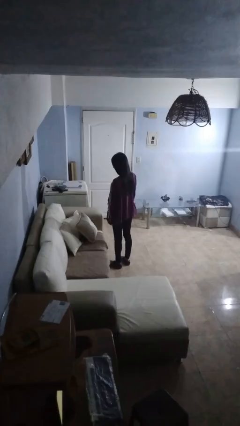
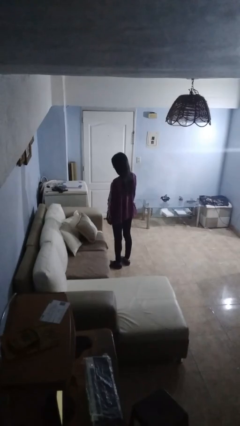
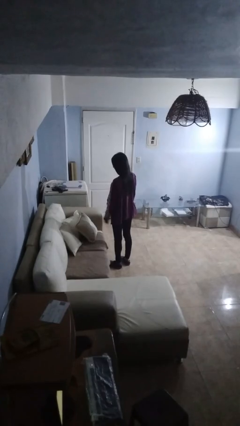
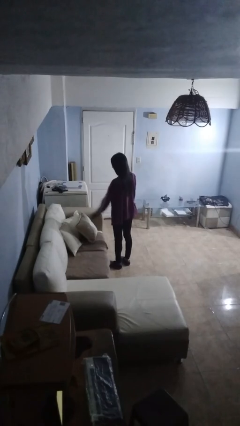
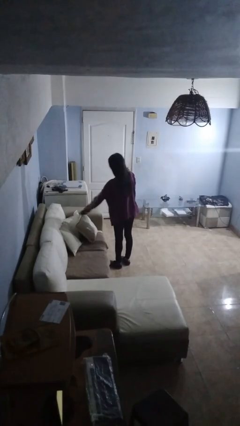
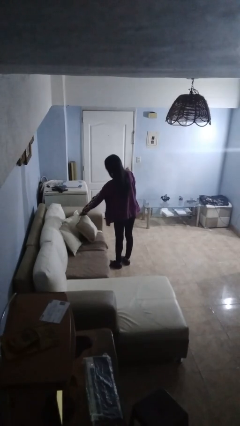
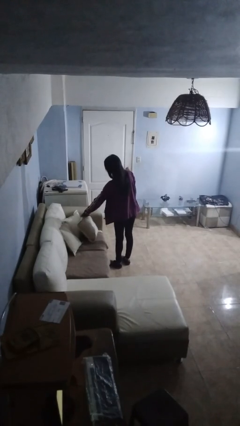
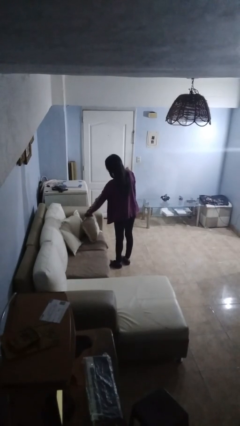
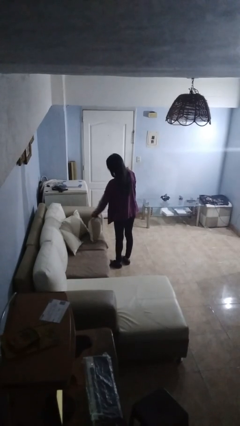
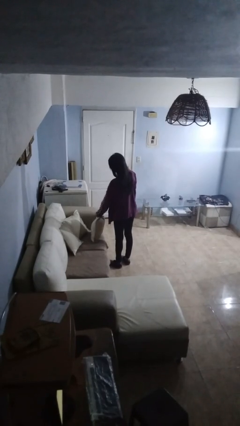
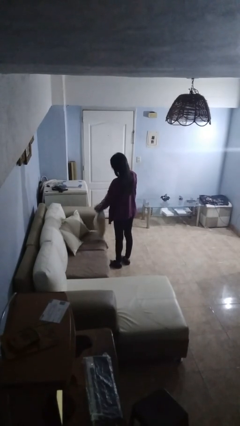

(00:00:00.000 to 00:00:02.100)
person puts down object on couch

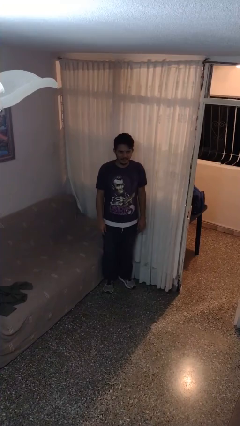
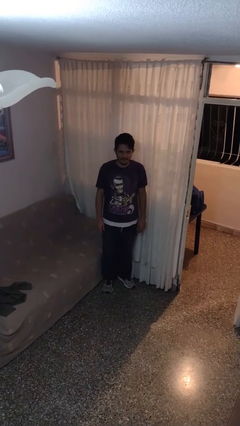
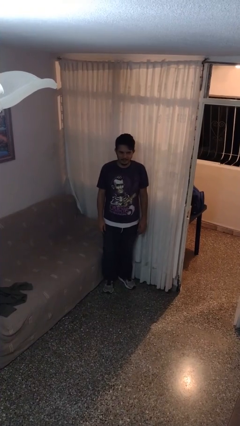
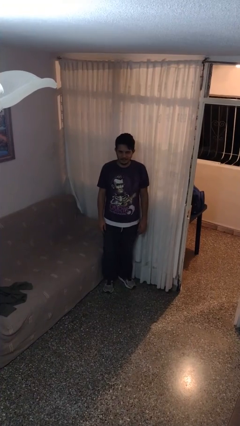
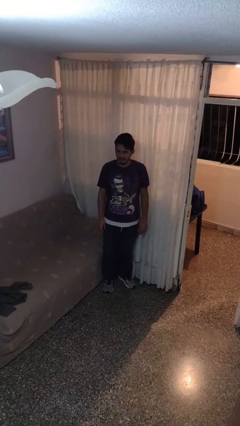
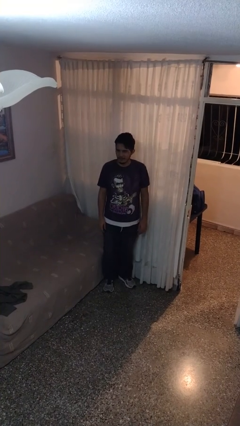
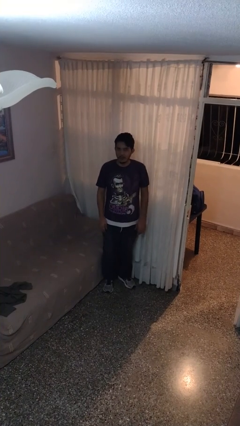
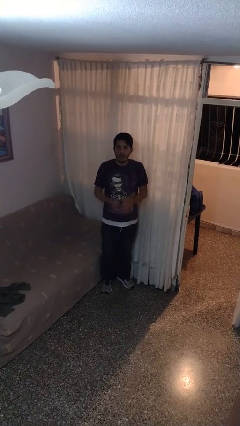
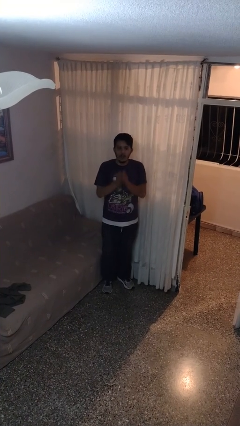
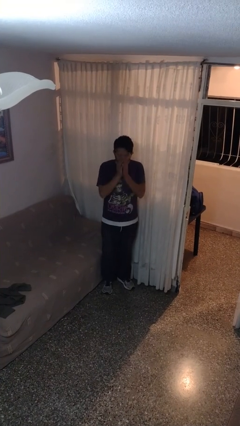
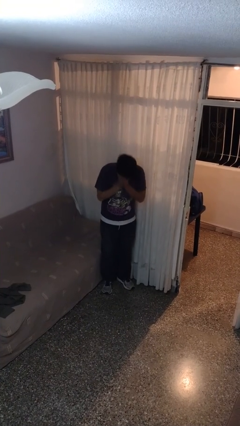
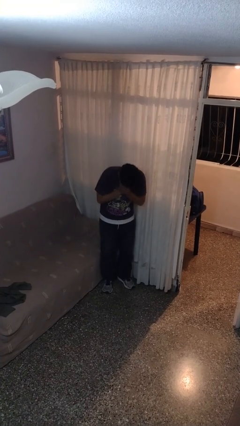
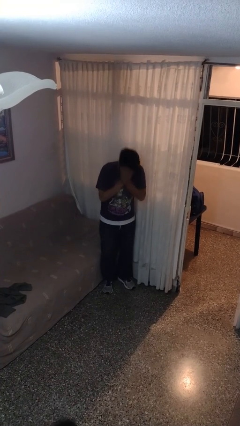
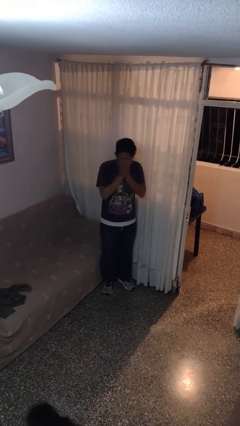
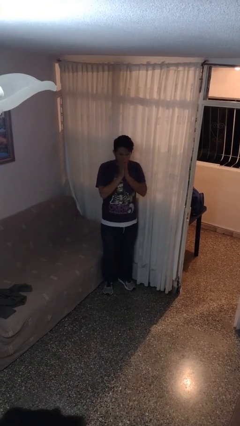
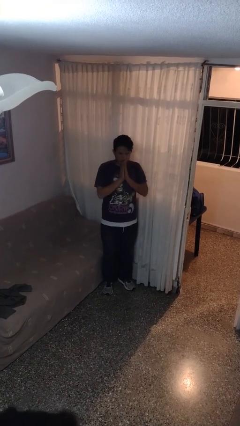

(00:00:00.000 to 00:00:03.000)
person sneezes into hand

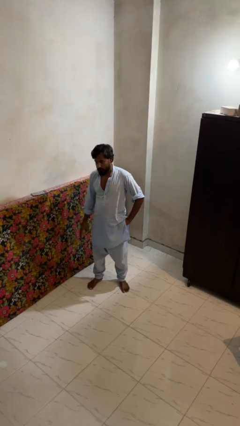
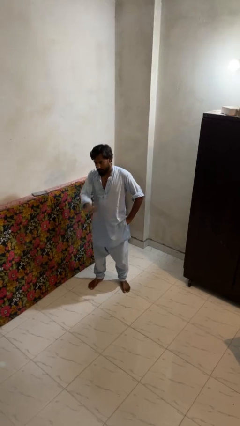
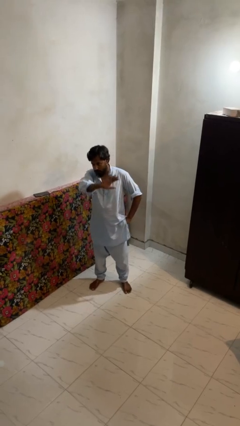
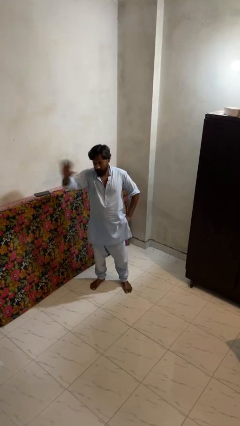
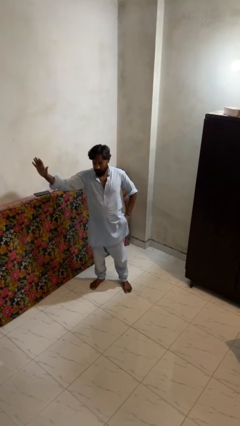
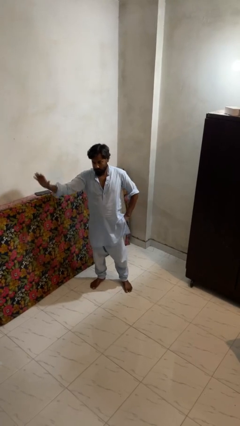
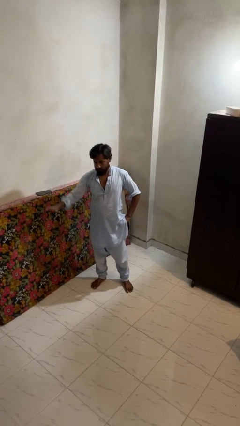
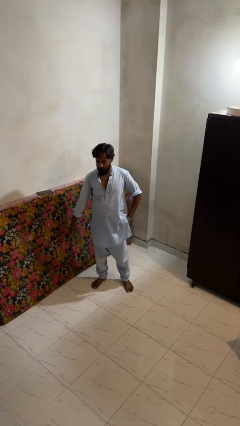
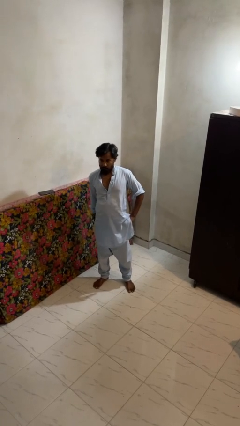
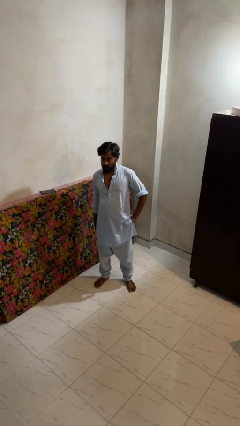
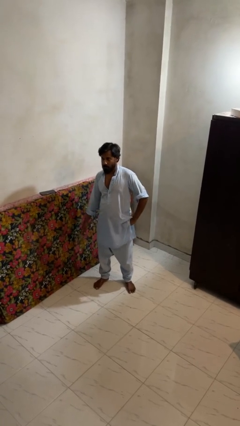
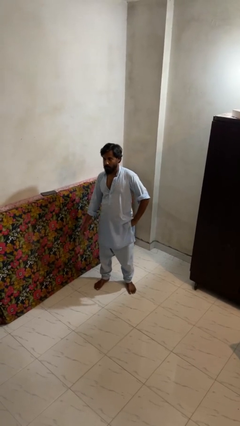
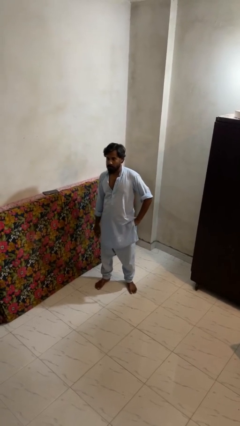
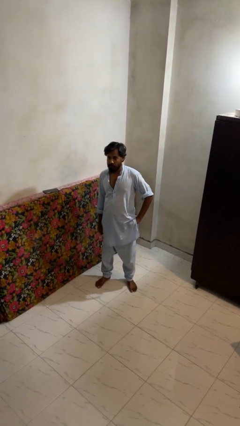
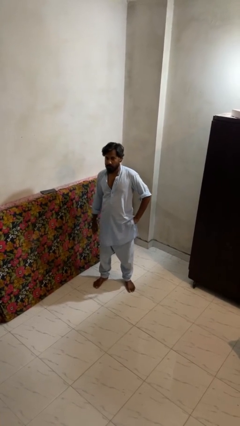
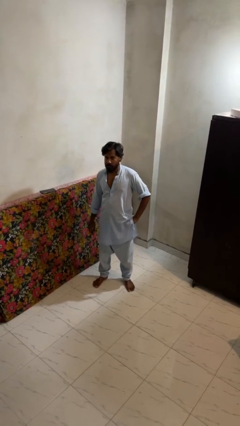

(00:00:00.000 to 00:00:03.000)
person gestures swipe right

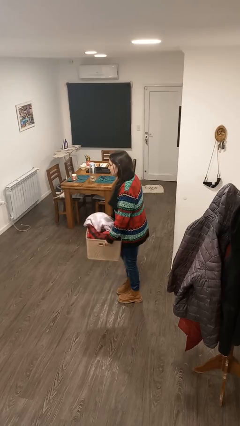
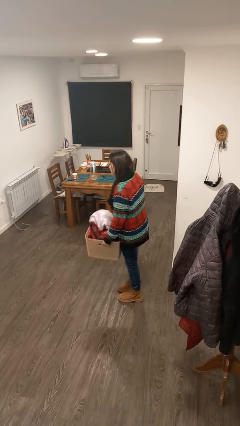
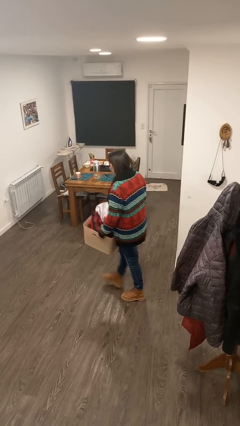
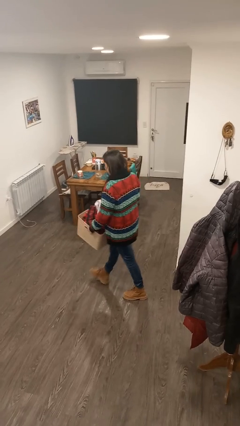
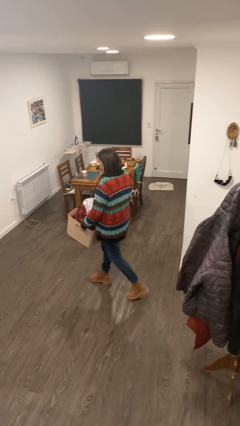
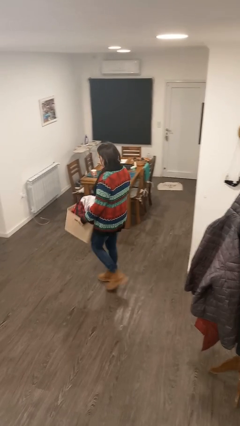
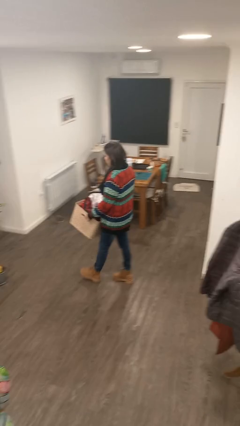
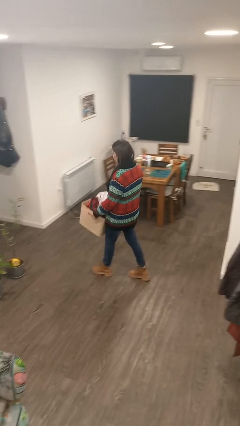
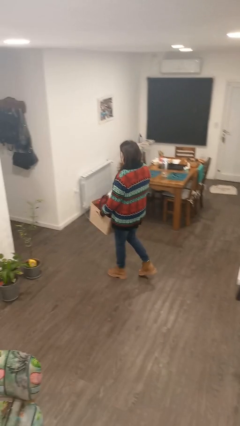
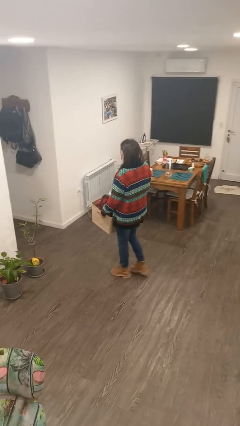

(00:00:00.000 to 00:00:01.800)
person carries laundry basket

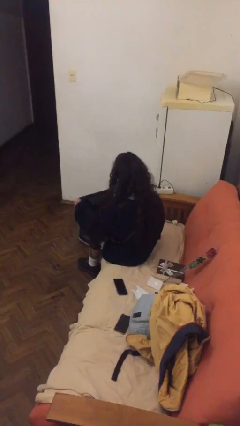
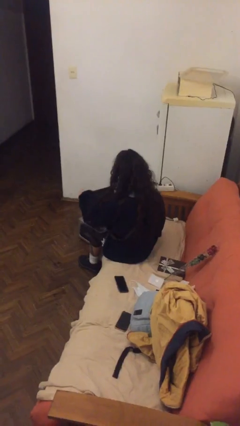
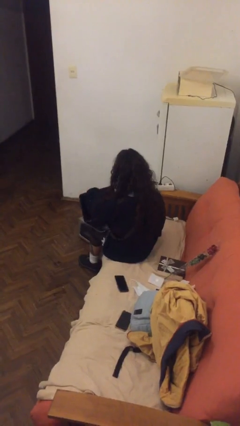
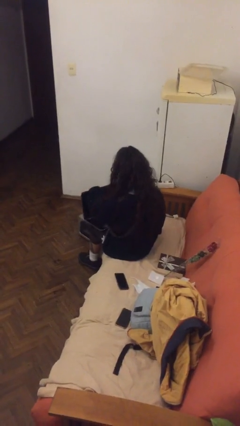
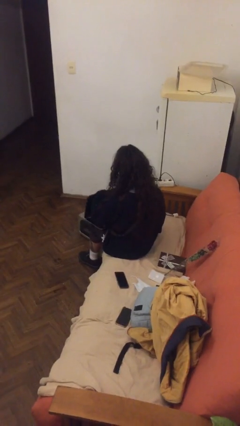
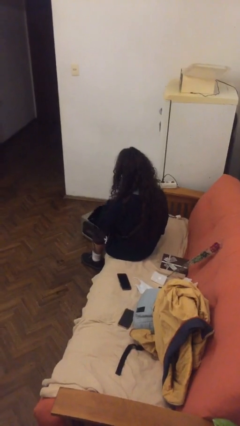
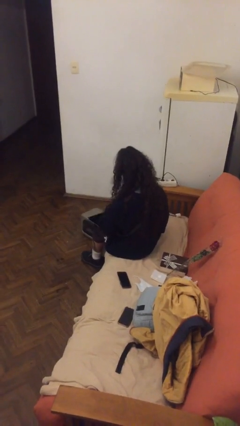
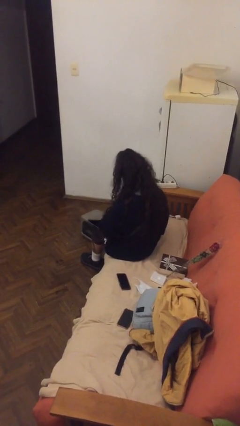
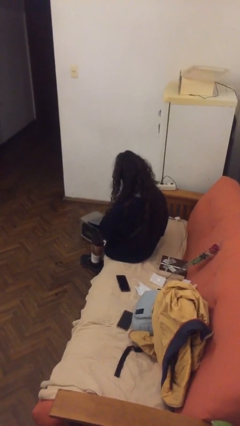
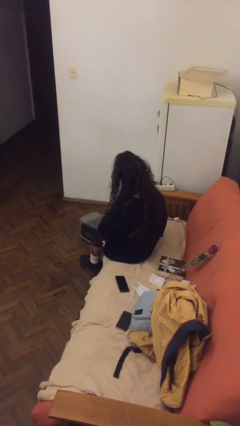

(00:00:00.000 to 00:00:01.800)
person closes laptop

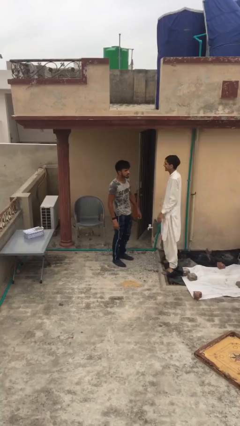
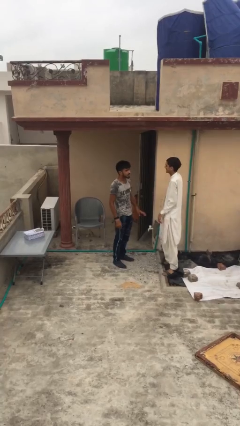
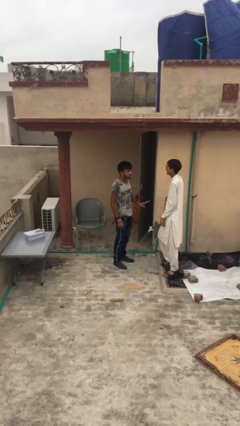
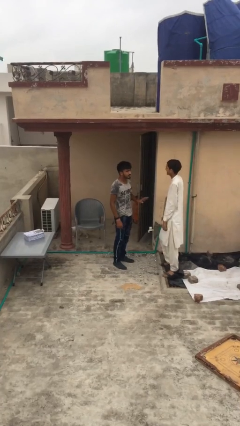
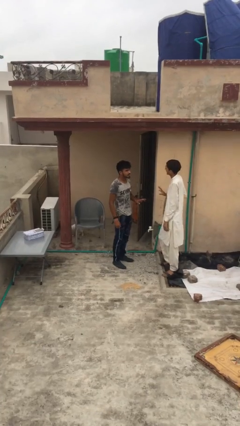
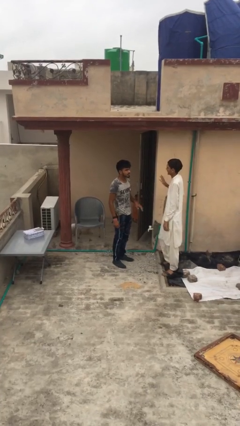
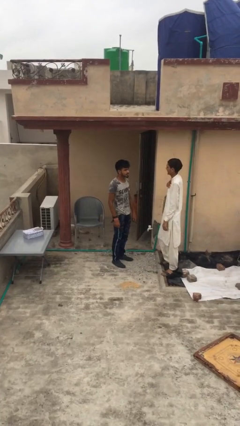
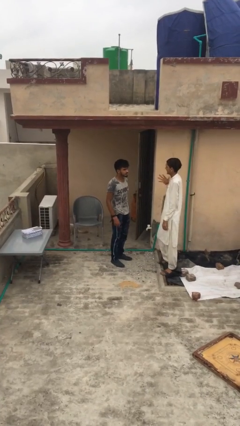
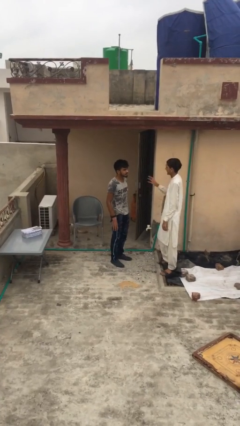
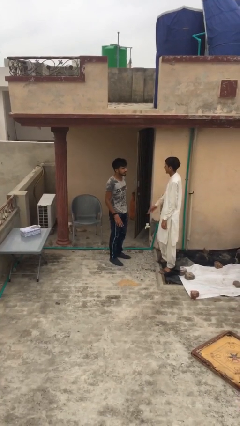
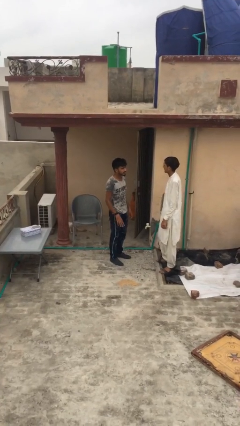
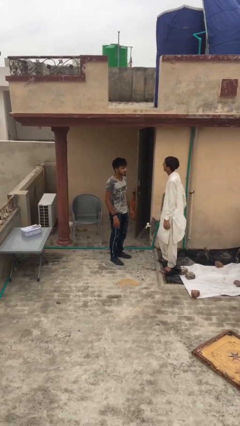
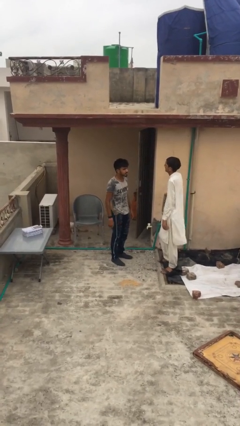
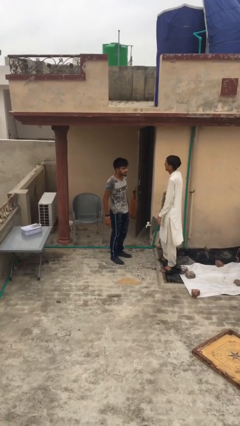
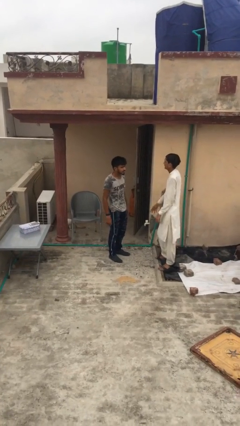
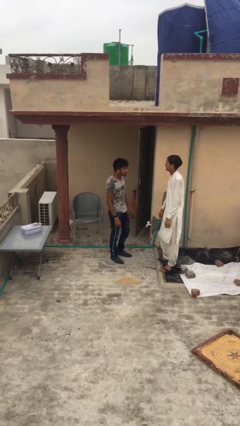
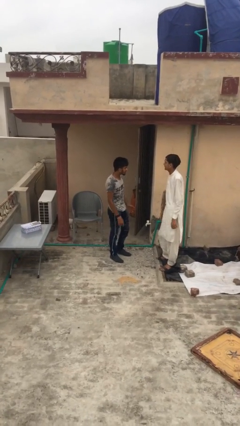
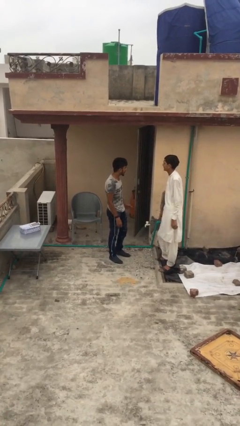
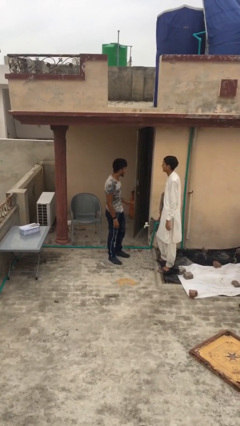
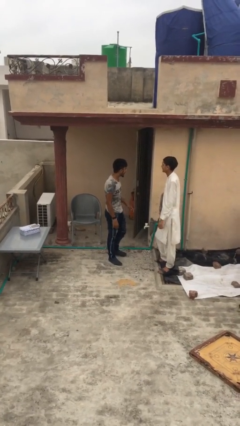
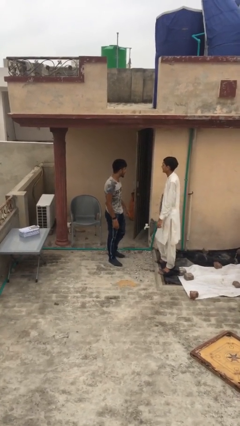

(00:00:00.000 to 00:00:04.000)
person talks to person

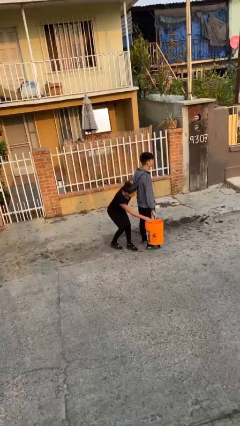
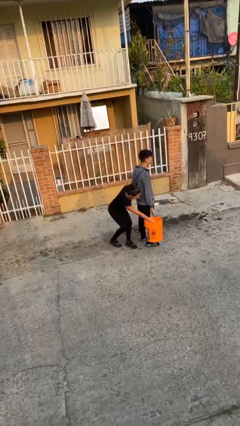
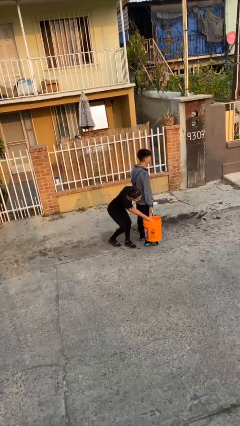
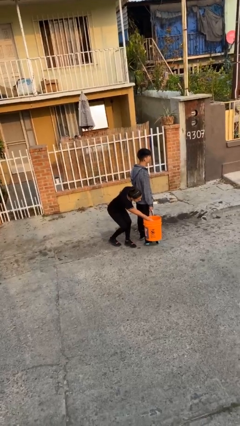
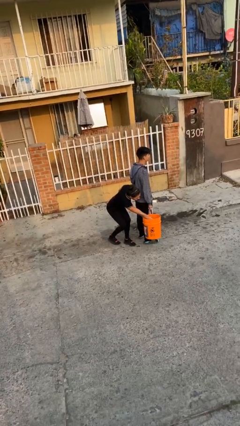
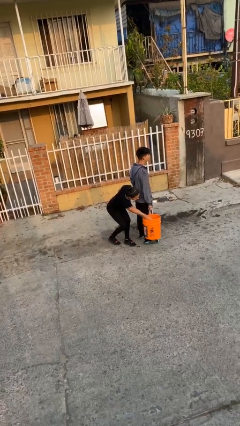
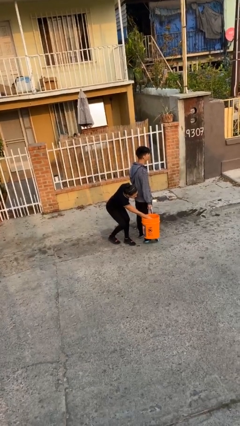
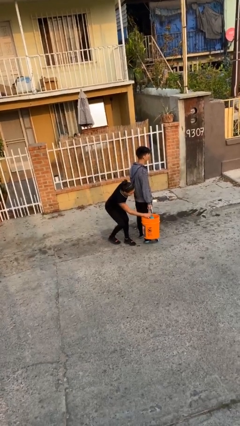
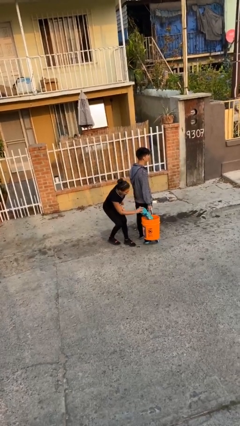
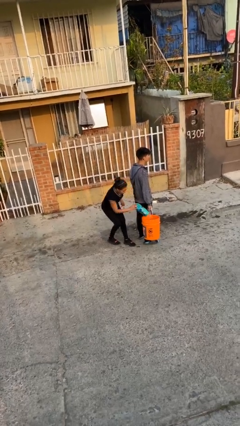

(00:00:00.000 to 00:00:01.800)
person steals object from person
